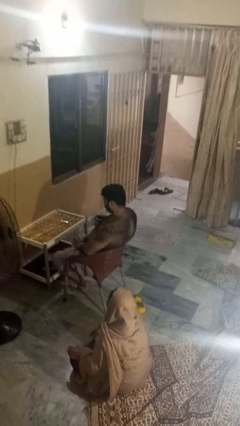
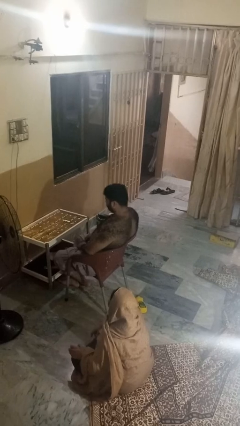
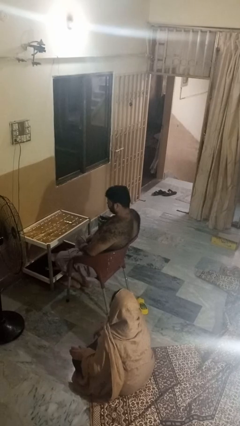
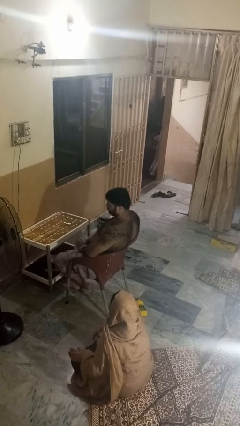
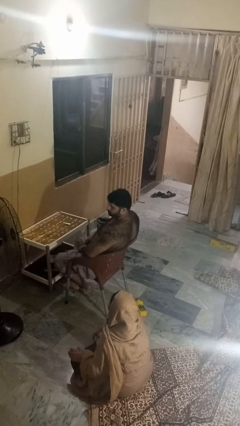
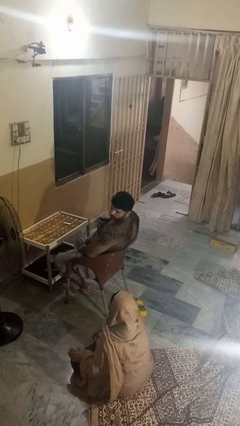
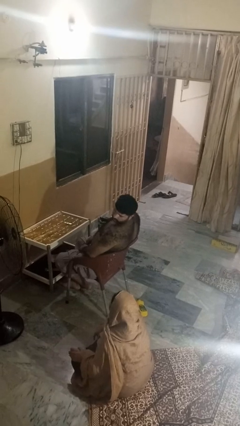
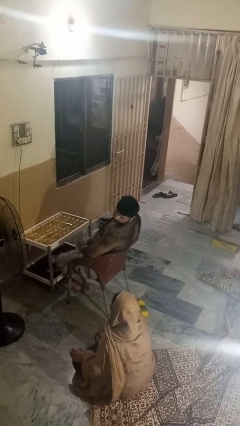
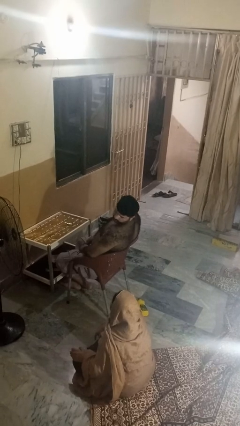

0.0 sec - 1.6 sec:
person looks over shoulder

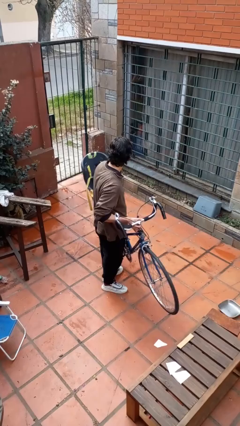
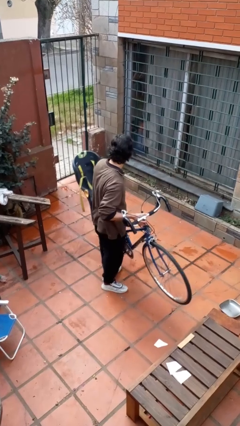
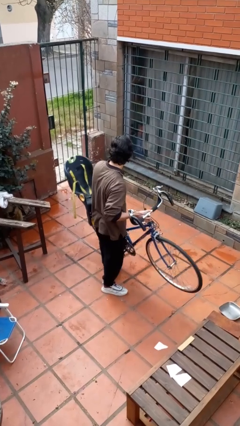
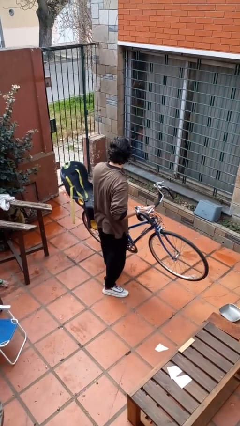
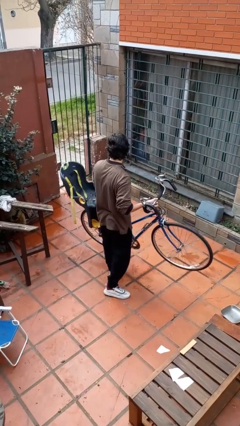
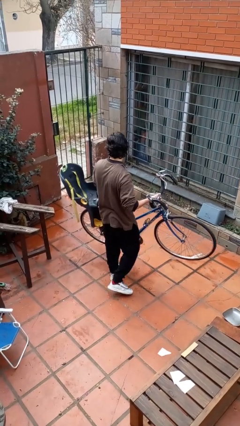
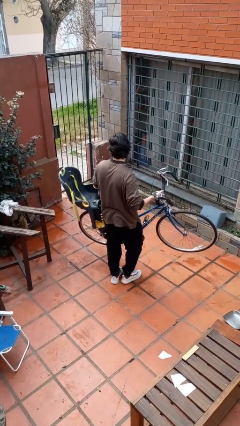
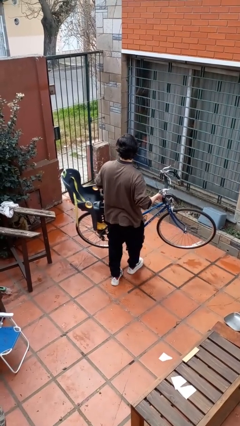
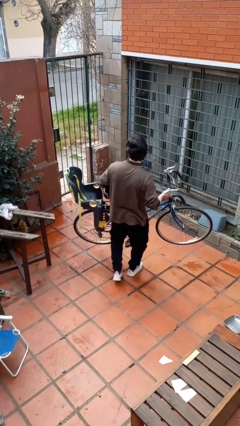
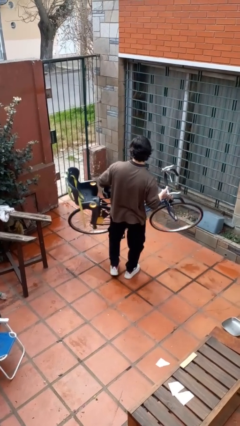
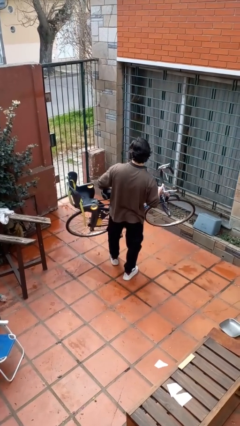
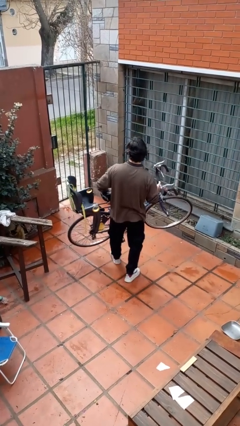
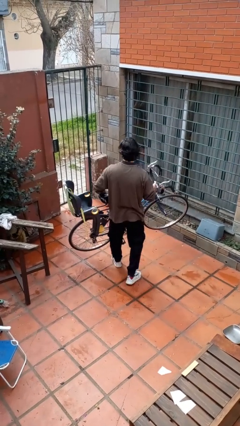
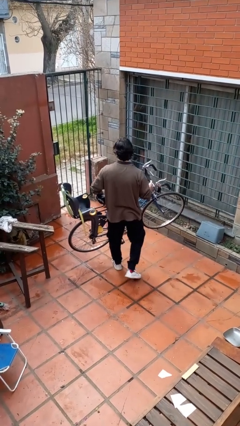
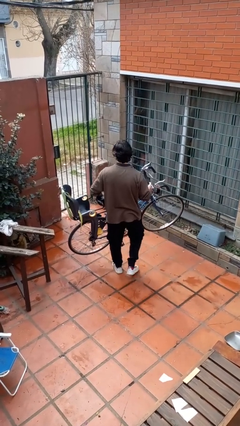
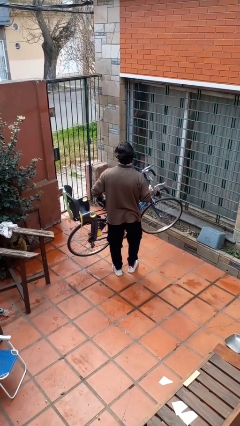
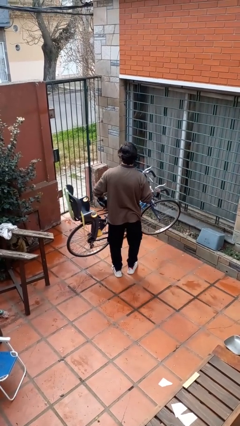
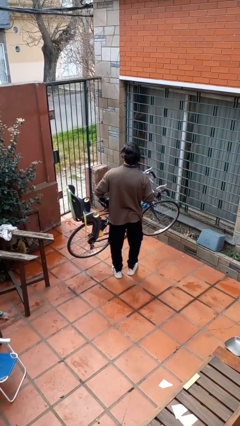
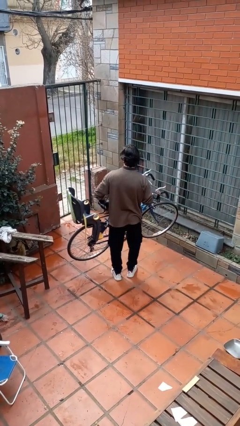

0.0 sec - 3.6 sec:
person carries bicycle

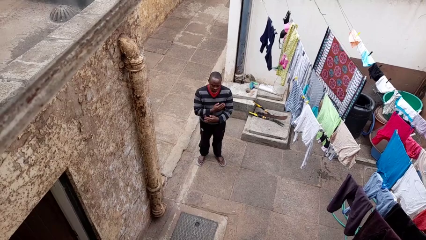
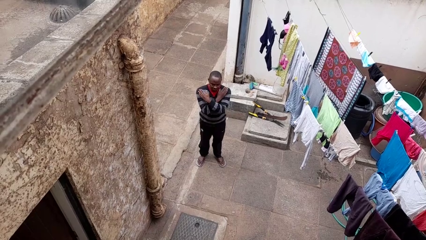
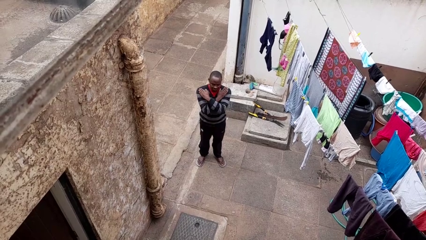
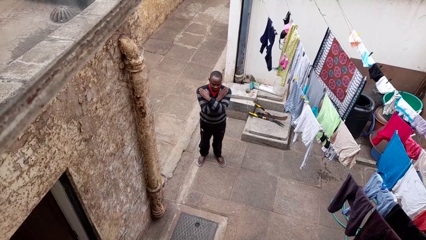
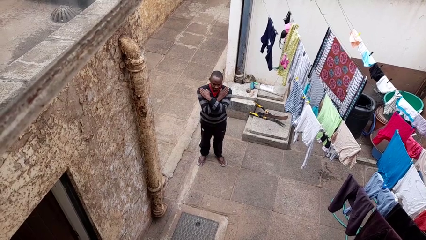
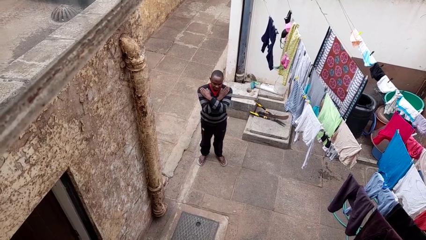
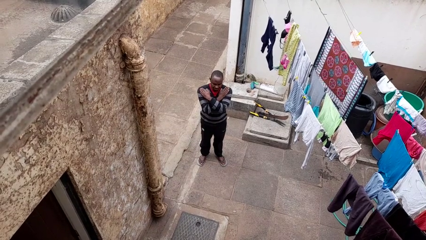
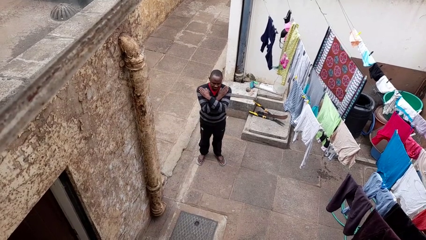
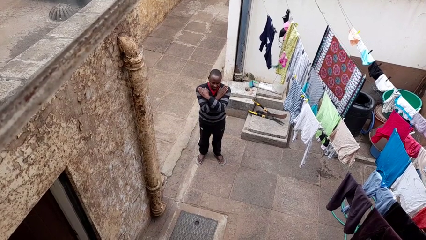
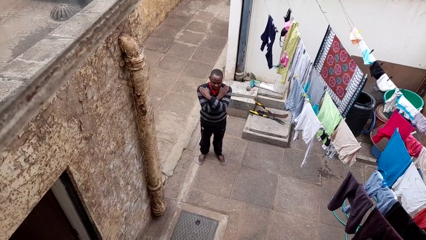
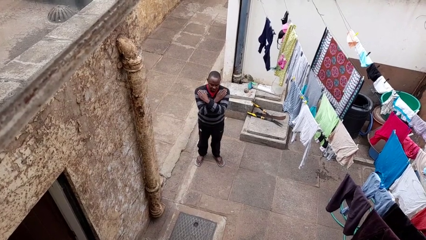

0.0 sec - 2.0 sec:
person gestures arms x

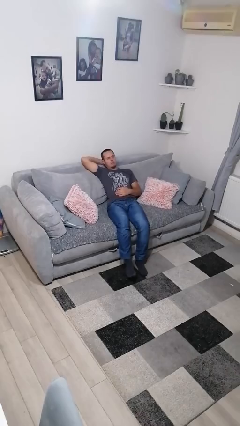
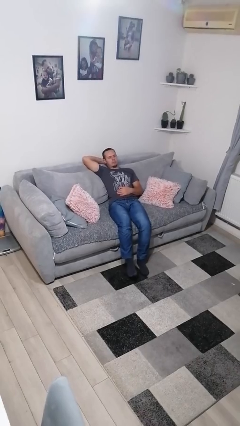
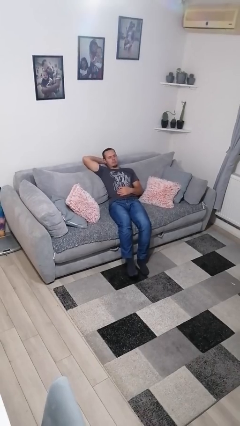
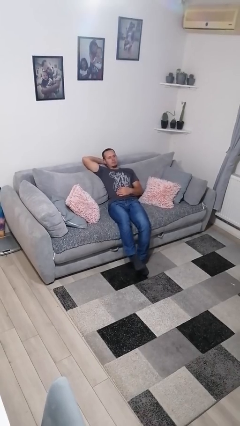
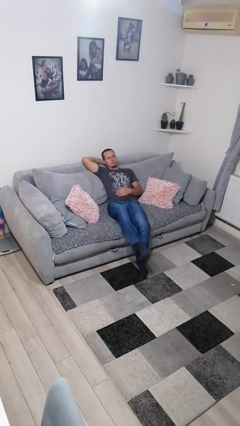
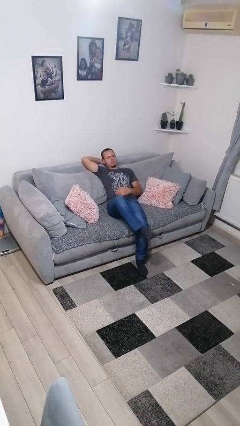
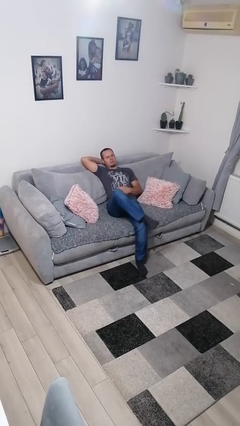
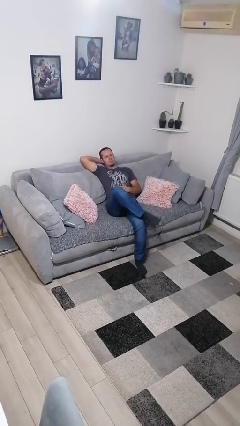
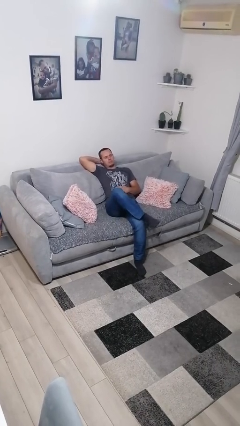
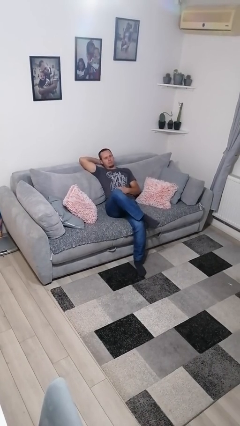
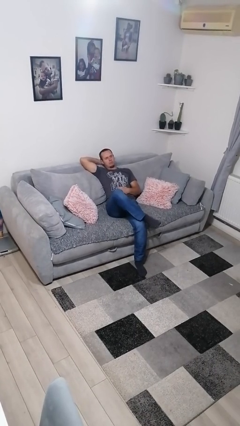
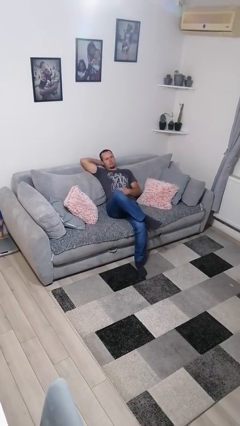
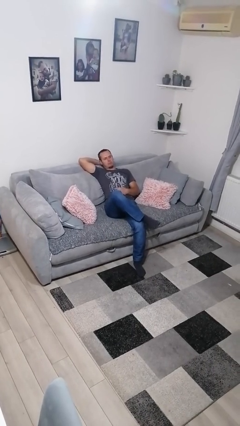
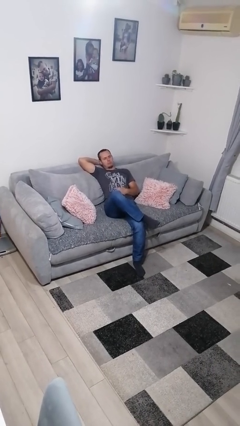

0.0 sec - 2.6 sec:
person crosses legs

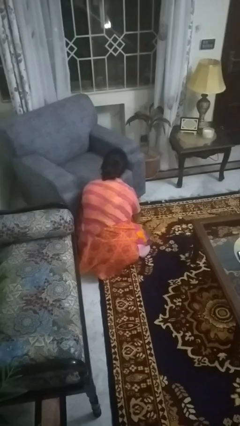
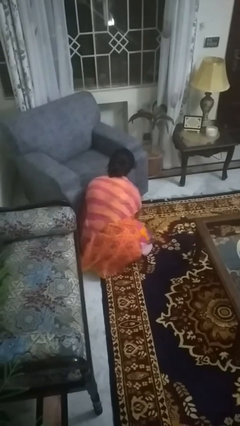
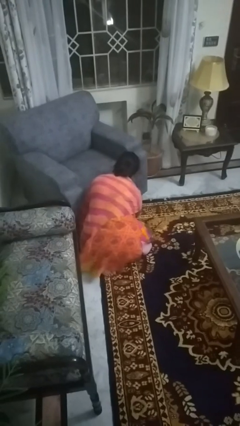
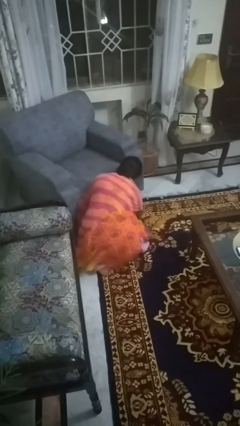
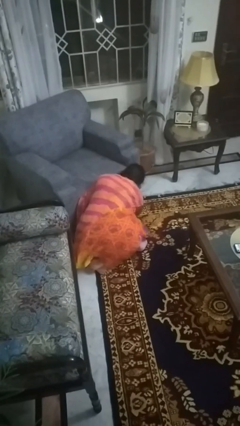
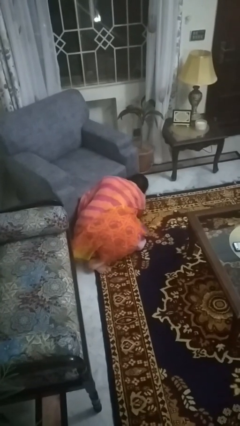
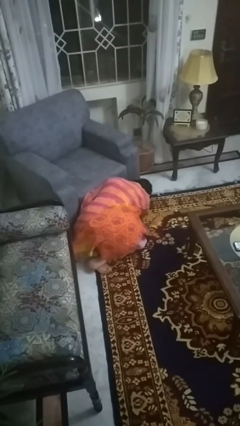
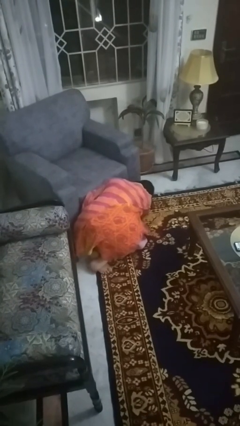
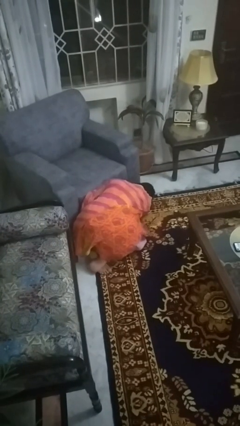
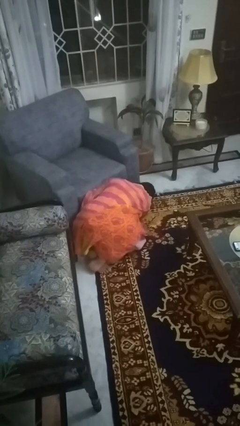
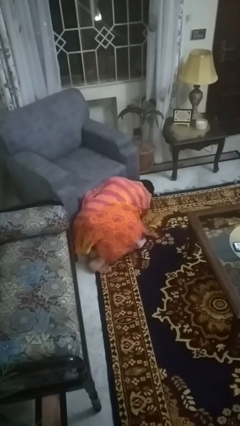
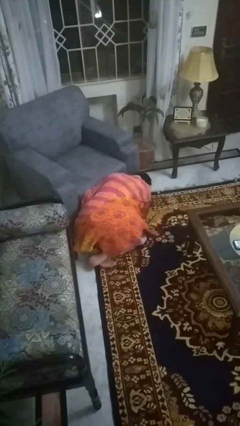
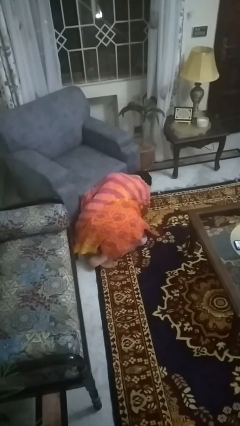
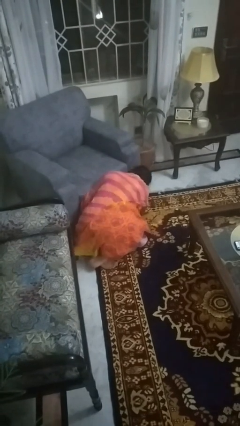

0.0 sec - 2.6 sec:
person searches under couch

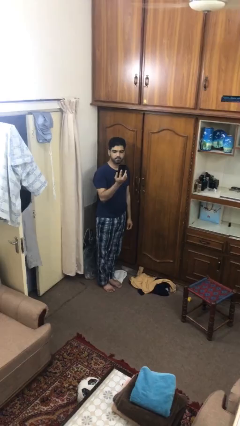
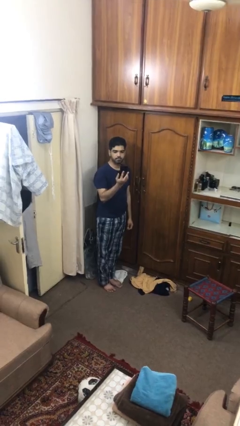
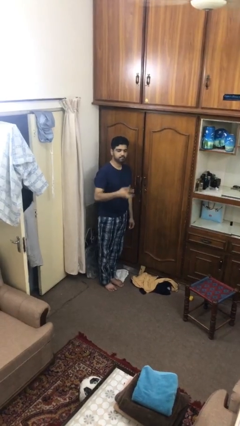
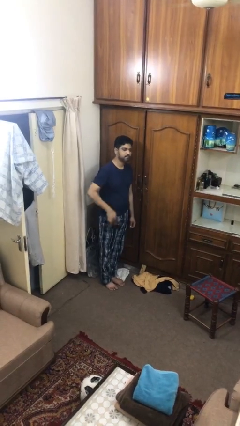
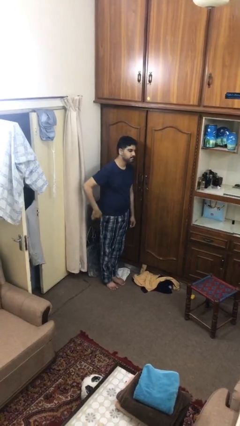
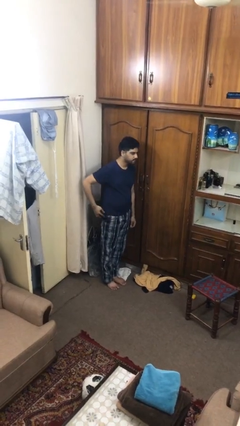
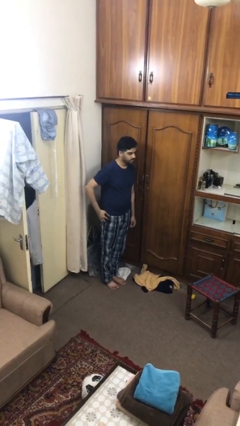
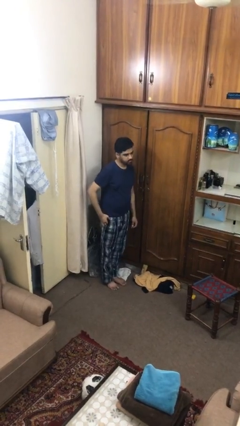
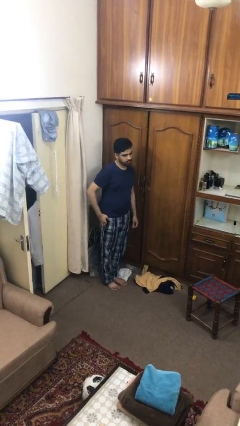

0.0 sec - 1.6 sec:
person puts phone into pocket

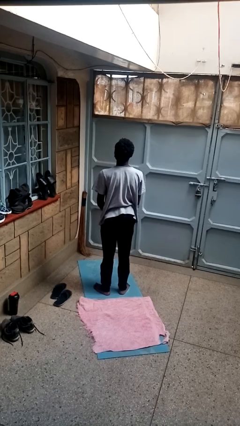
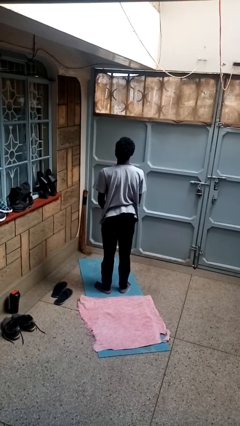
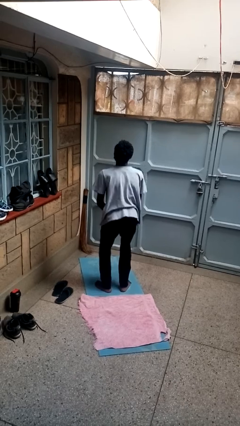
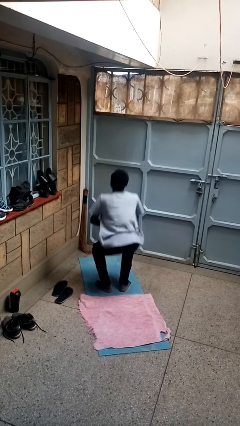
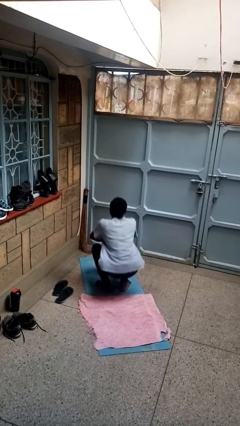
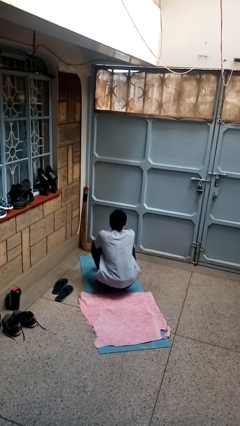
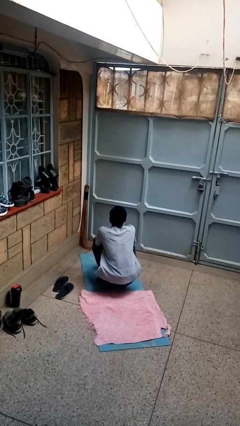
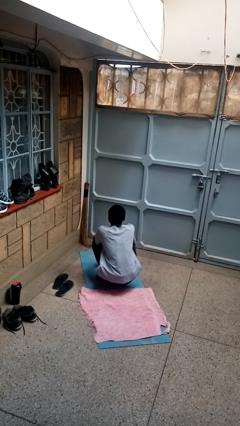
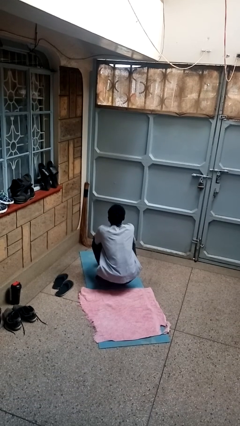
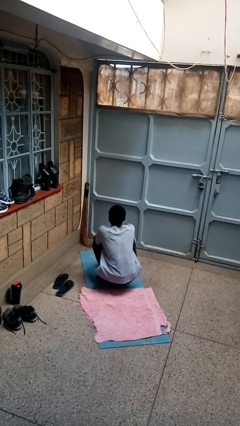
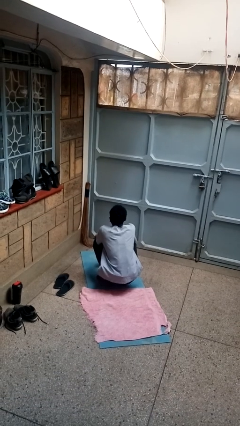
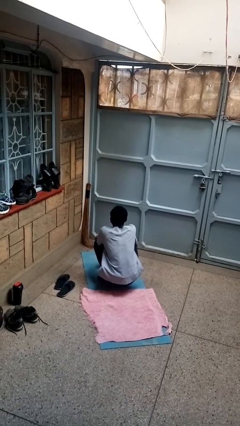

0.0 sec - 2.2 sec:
person squats
